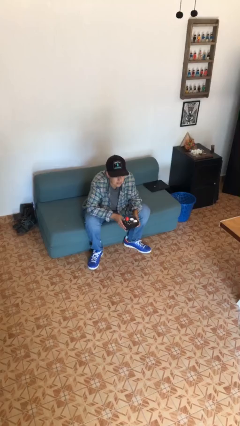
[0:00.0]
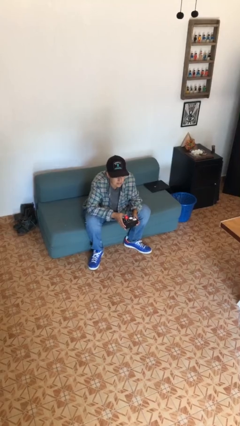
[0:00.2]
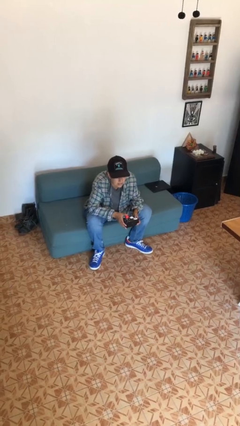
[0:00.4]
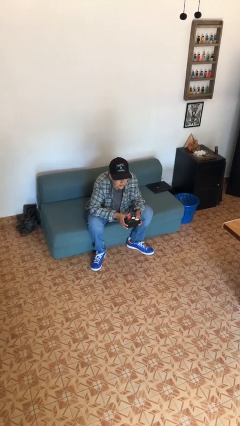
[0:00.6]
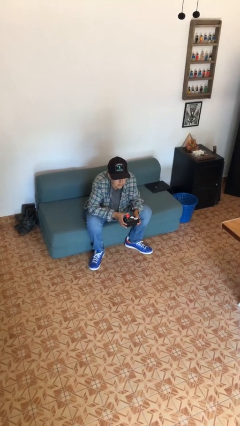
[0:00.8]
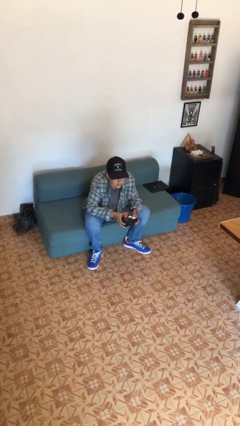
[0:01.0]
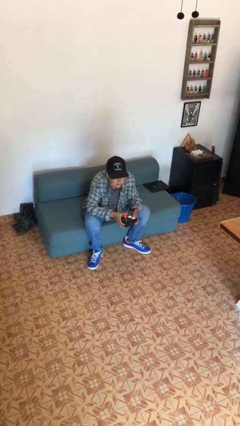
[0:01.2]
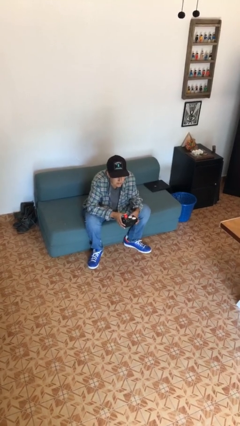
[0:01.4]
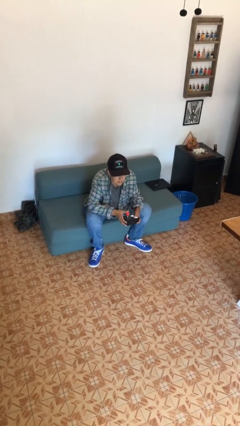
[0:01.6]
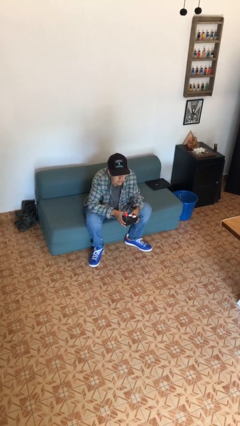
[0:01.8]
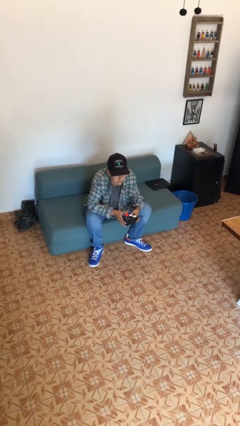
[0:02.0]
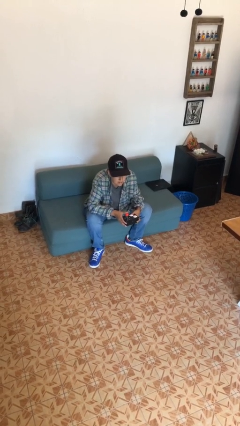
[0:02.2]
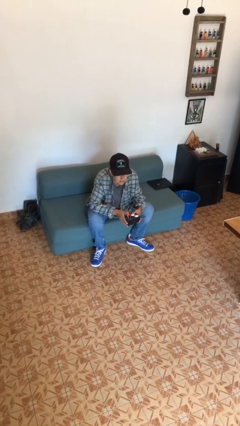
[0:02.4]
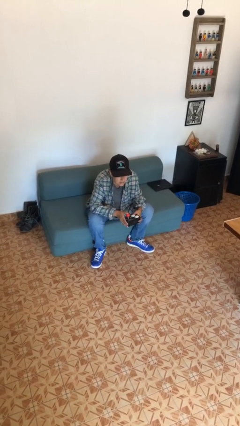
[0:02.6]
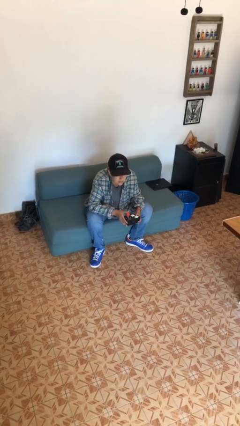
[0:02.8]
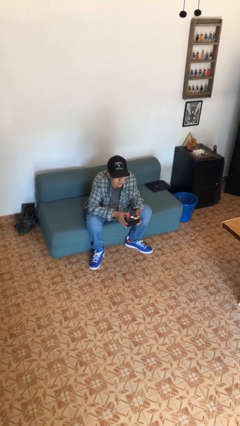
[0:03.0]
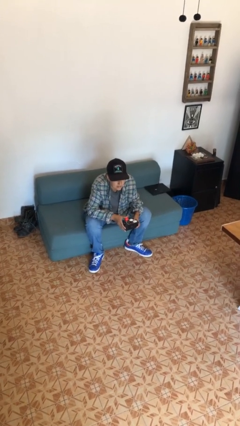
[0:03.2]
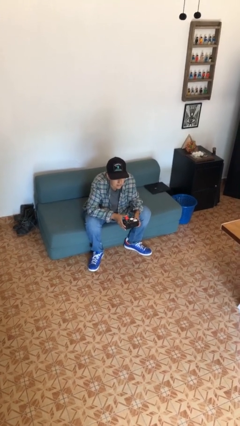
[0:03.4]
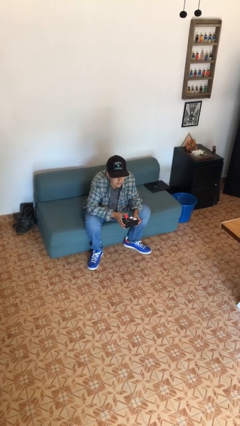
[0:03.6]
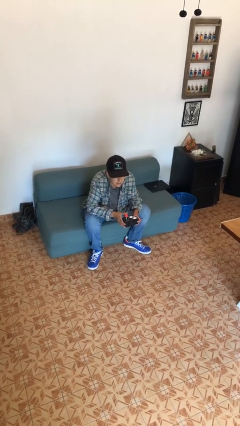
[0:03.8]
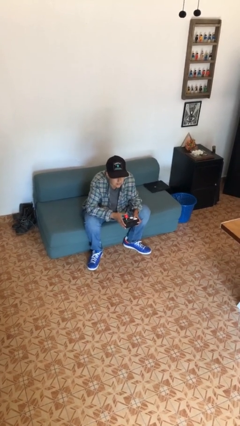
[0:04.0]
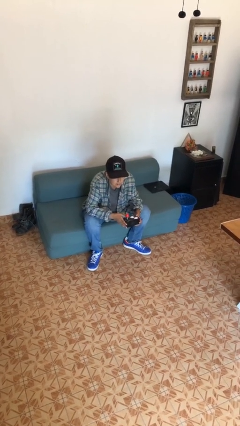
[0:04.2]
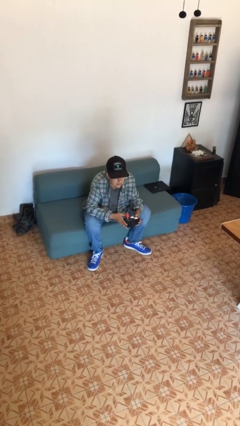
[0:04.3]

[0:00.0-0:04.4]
person interacts with handheld game

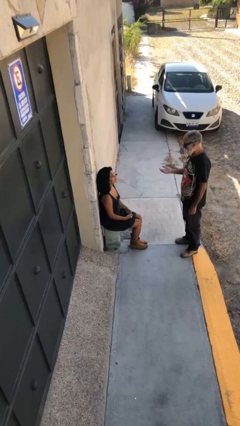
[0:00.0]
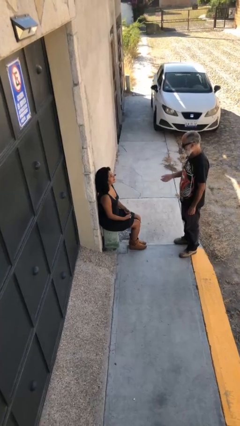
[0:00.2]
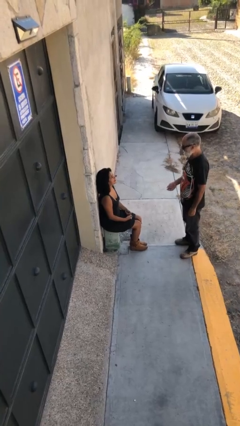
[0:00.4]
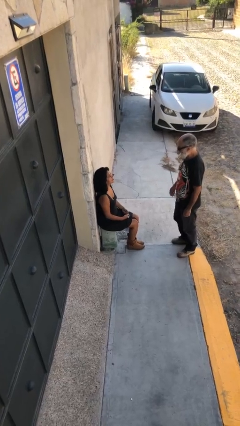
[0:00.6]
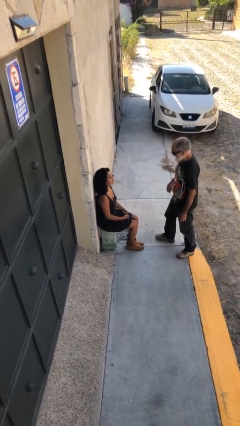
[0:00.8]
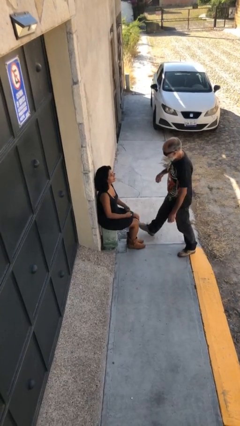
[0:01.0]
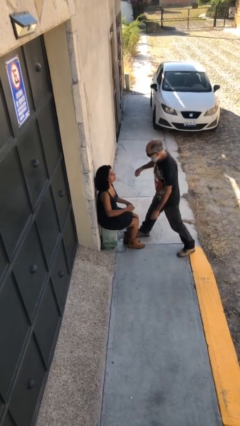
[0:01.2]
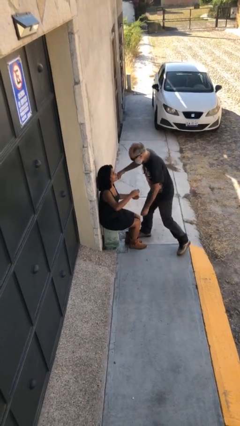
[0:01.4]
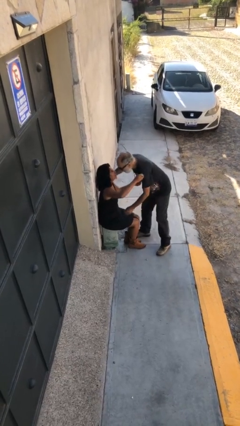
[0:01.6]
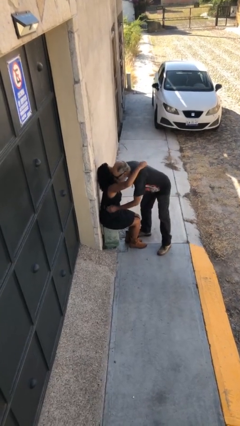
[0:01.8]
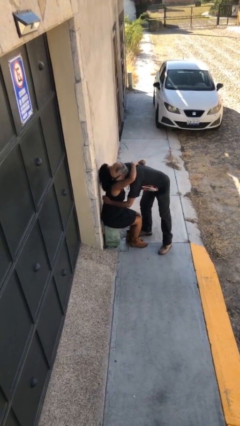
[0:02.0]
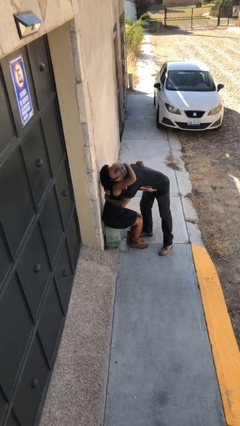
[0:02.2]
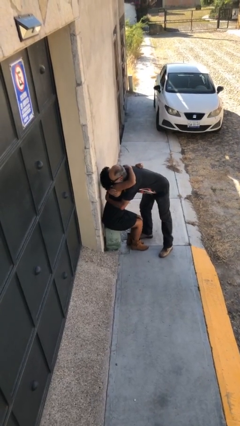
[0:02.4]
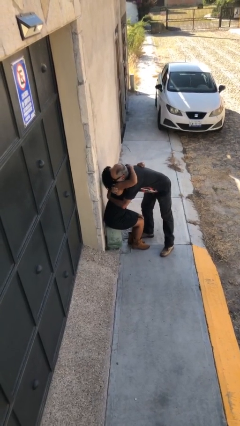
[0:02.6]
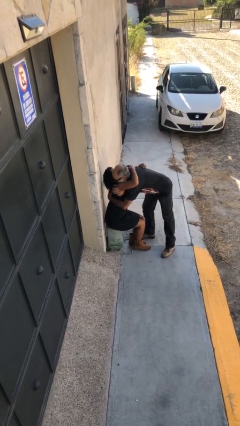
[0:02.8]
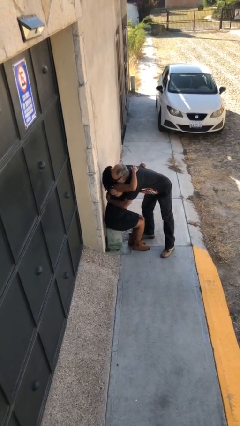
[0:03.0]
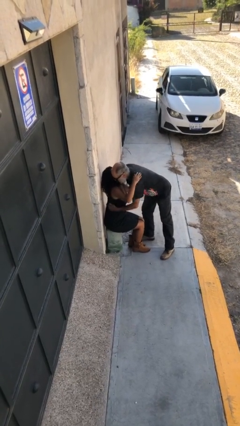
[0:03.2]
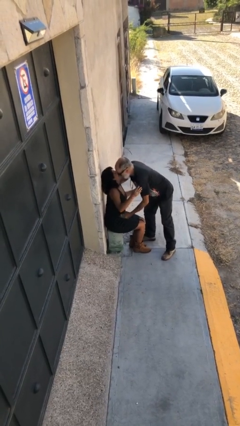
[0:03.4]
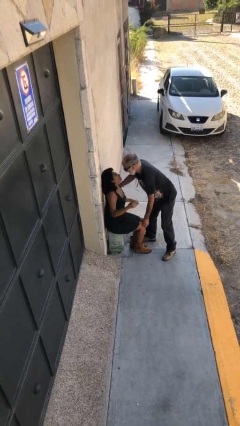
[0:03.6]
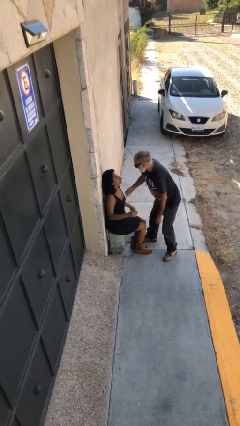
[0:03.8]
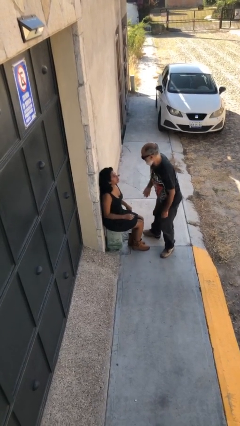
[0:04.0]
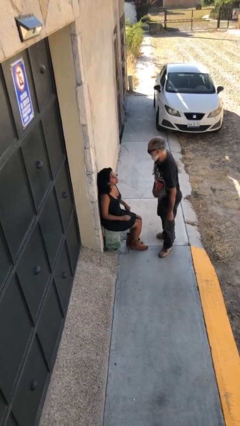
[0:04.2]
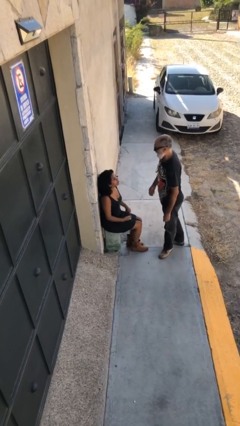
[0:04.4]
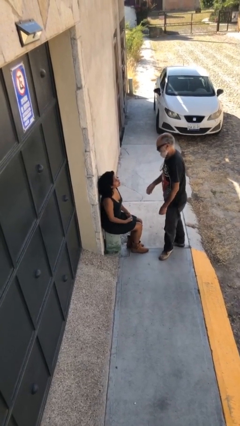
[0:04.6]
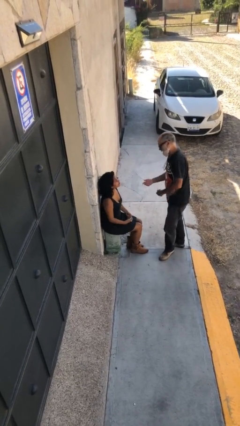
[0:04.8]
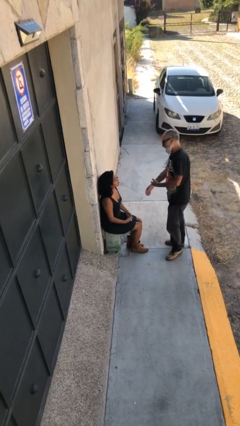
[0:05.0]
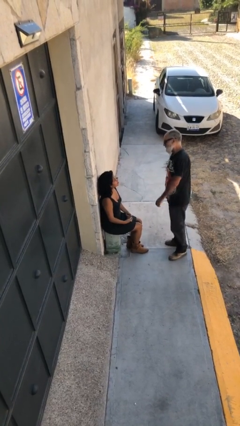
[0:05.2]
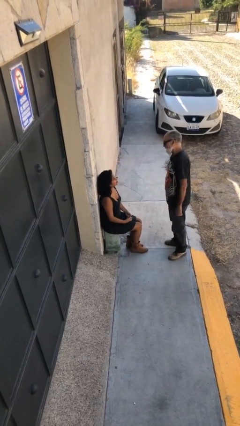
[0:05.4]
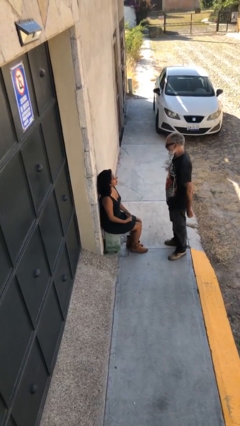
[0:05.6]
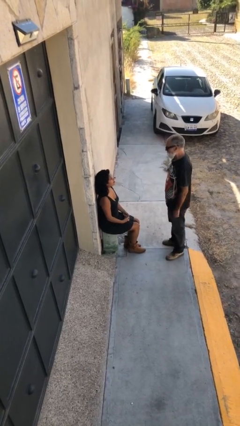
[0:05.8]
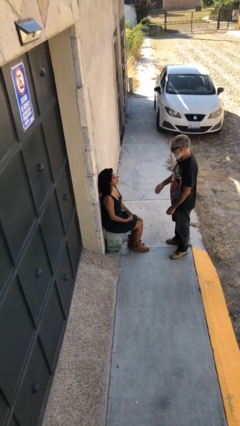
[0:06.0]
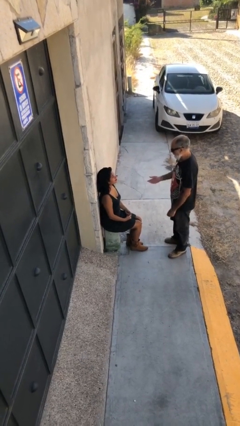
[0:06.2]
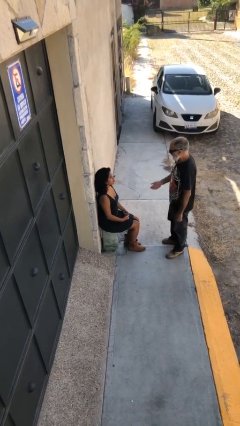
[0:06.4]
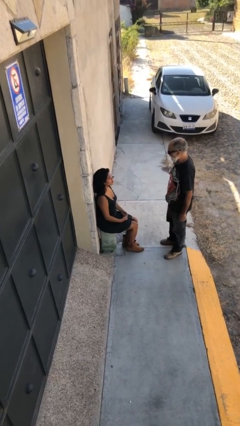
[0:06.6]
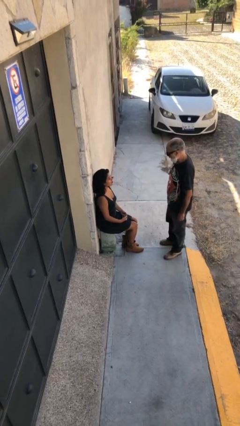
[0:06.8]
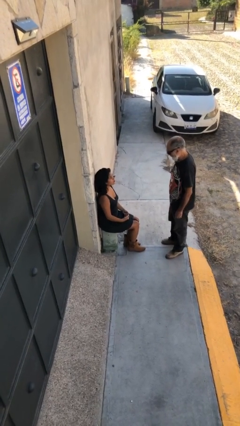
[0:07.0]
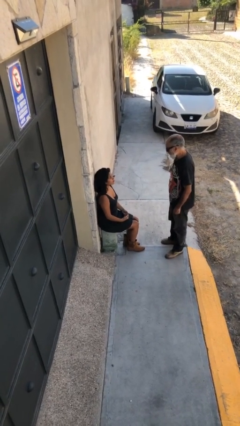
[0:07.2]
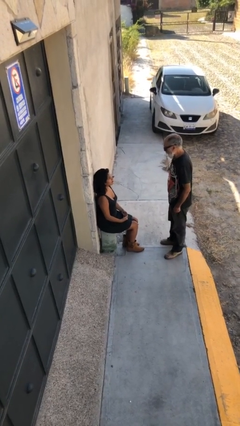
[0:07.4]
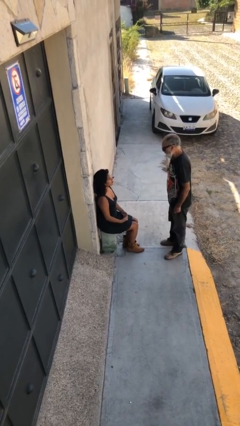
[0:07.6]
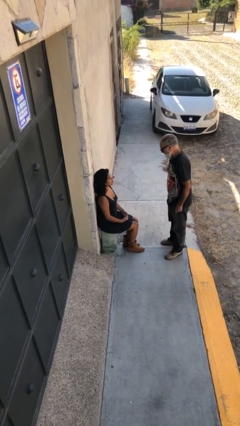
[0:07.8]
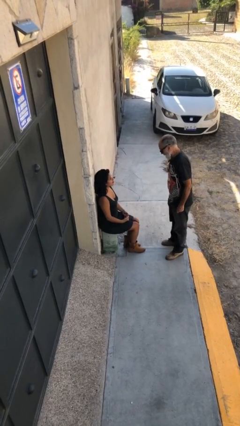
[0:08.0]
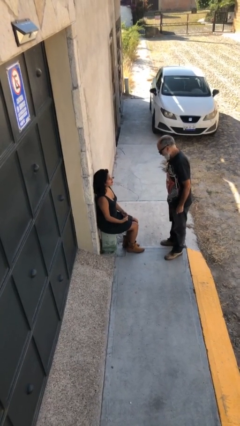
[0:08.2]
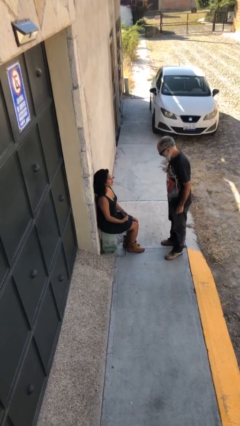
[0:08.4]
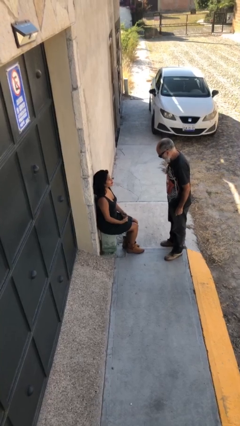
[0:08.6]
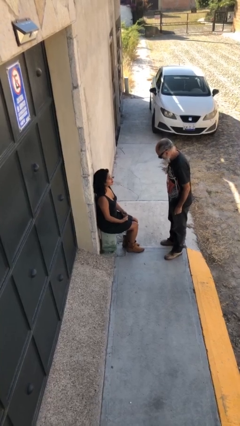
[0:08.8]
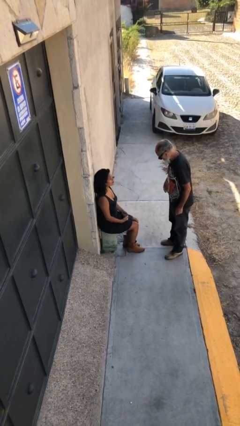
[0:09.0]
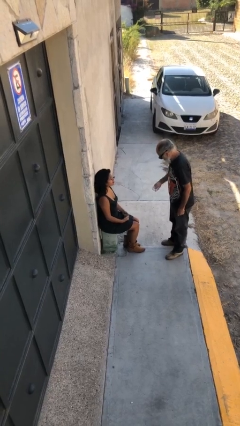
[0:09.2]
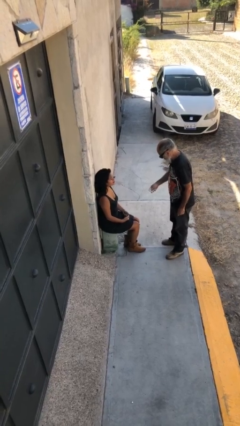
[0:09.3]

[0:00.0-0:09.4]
person embraces person

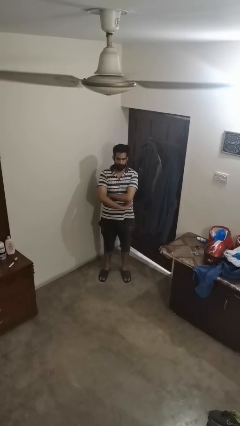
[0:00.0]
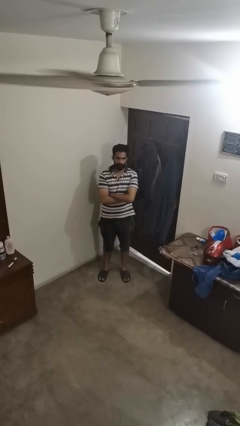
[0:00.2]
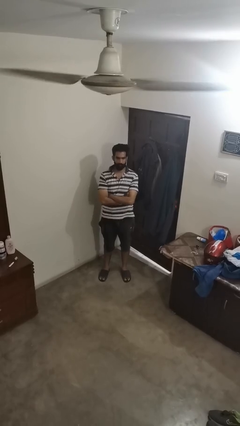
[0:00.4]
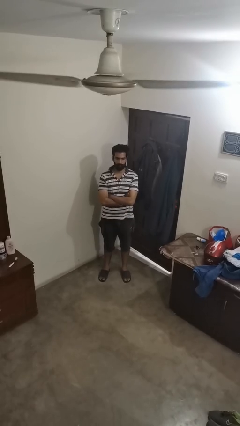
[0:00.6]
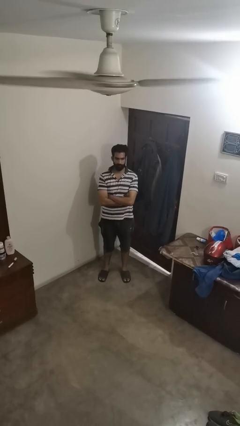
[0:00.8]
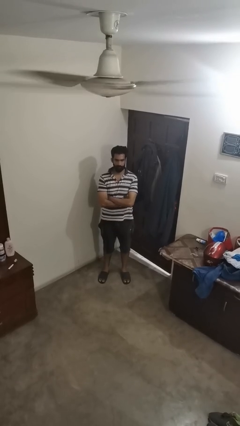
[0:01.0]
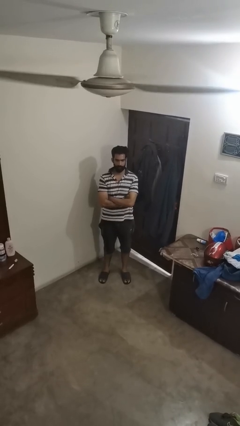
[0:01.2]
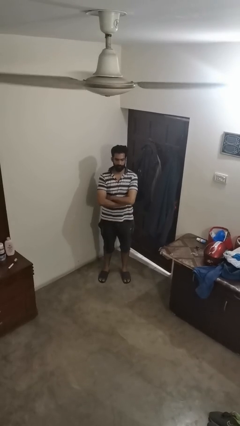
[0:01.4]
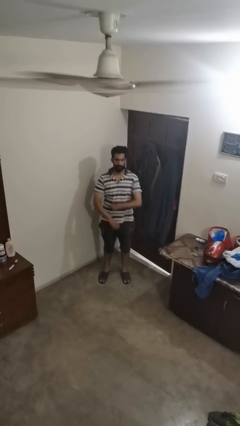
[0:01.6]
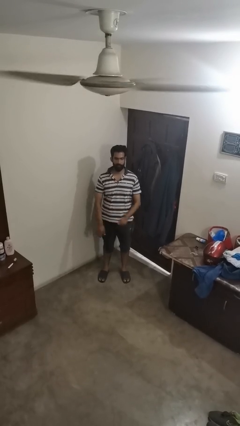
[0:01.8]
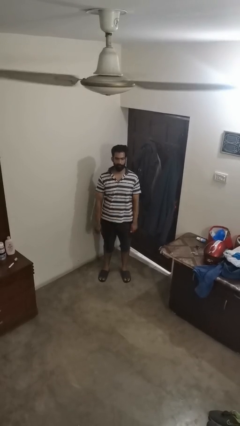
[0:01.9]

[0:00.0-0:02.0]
person crosses arms

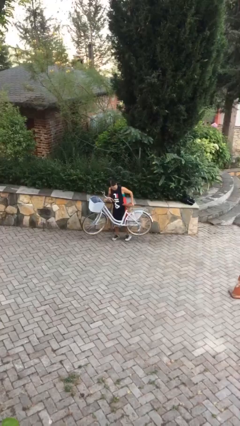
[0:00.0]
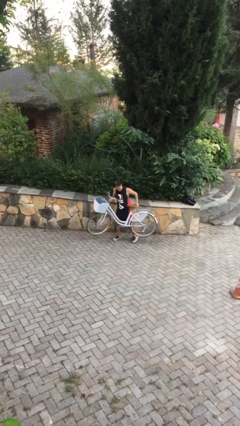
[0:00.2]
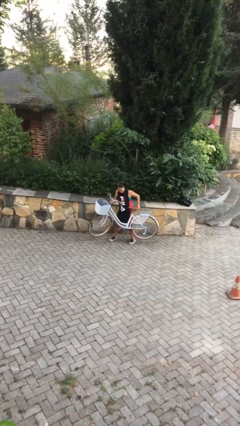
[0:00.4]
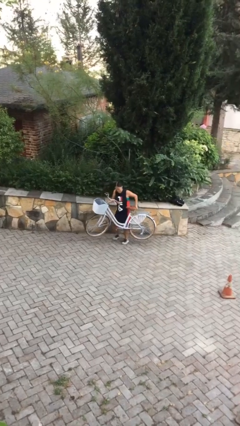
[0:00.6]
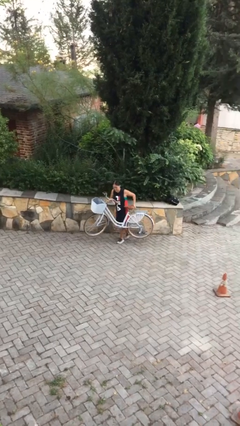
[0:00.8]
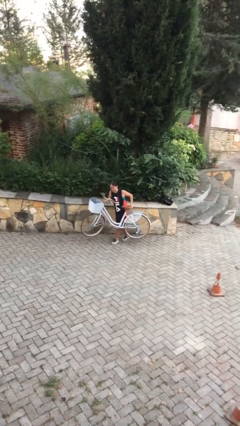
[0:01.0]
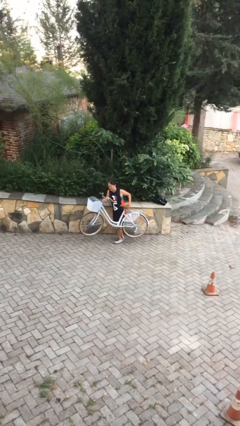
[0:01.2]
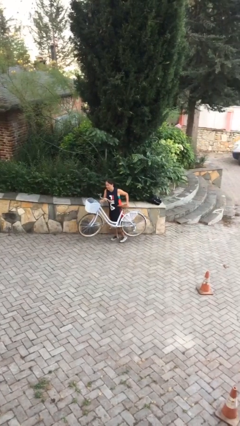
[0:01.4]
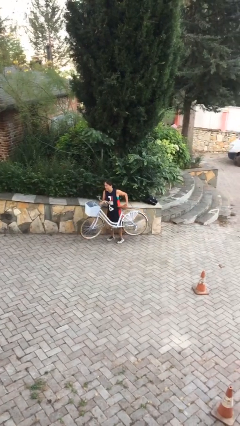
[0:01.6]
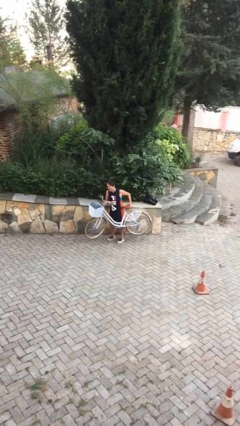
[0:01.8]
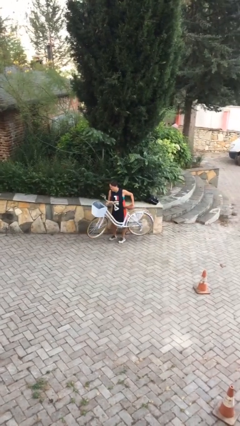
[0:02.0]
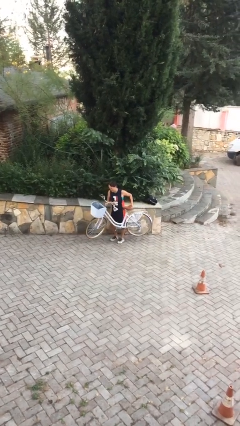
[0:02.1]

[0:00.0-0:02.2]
person carries bicycle
